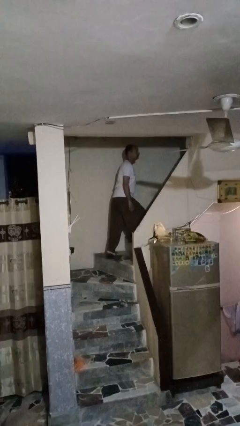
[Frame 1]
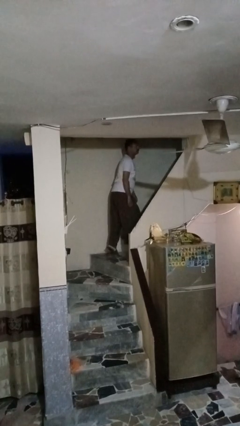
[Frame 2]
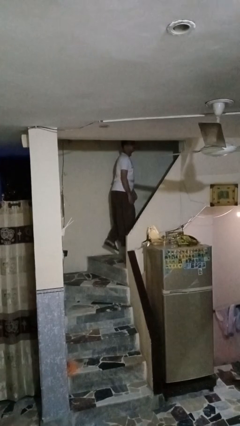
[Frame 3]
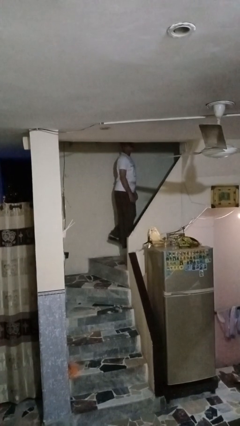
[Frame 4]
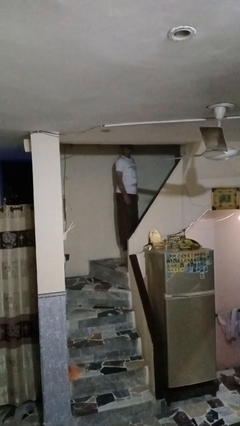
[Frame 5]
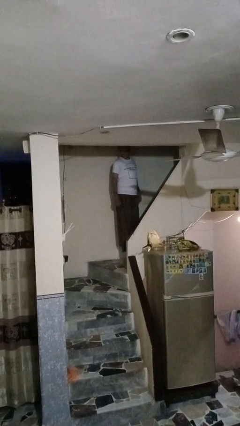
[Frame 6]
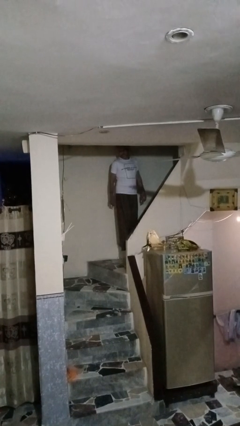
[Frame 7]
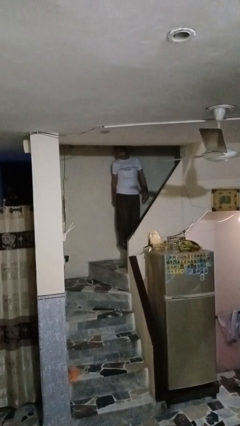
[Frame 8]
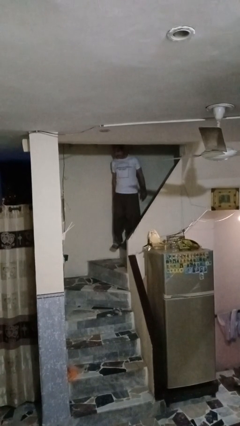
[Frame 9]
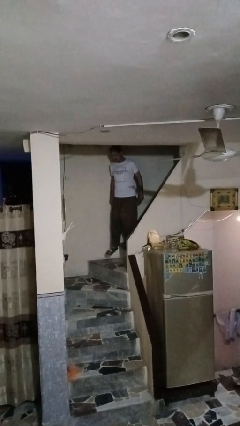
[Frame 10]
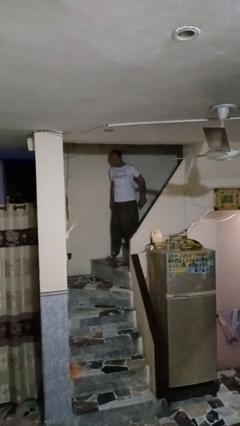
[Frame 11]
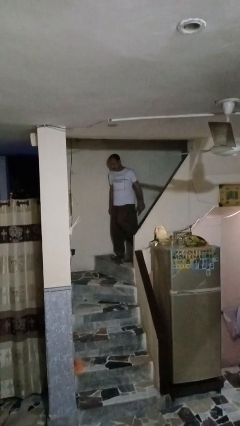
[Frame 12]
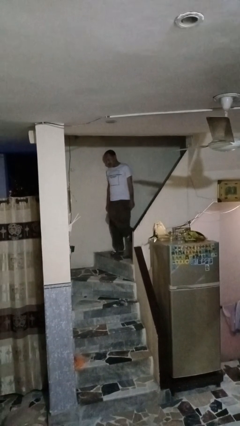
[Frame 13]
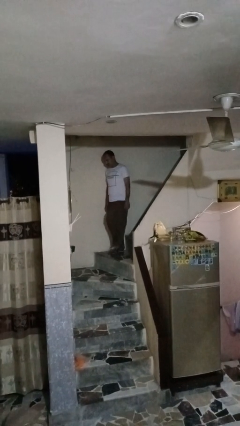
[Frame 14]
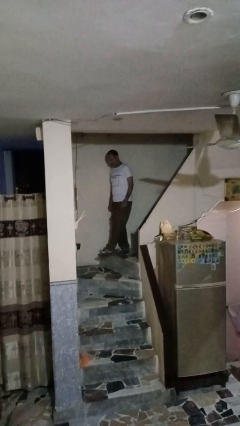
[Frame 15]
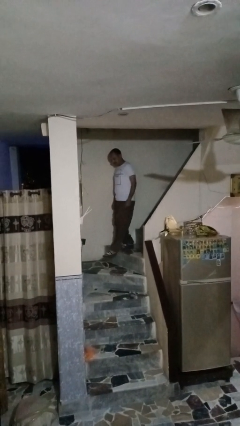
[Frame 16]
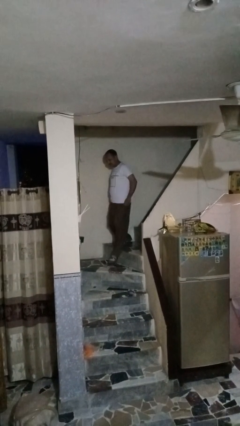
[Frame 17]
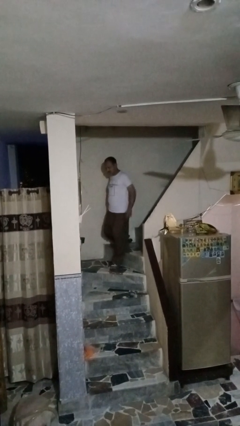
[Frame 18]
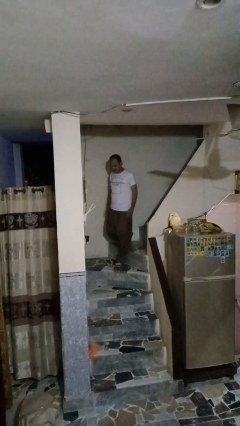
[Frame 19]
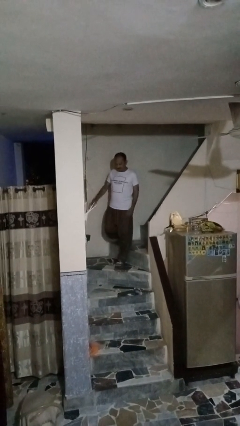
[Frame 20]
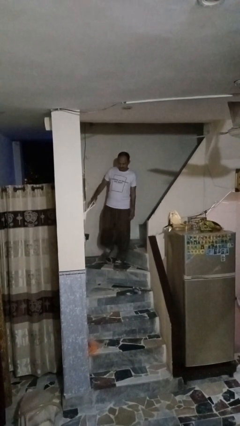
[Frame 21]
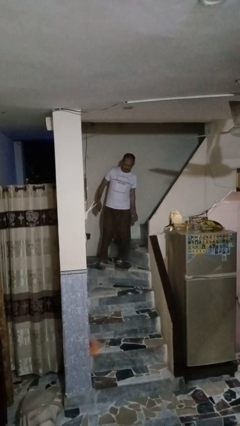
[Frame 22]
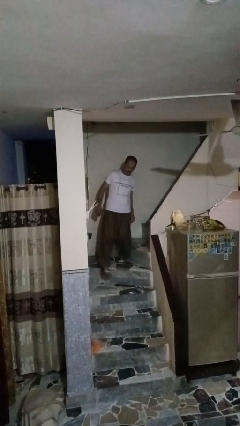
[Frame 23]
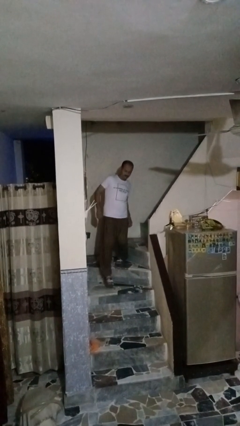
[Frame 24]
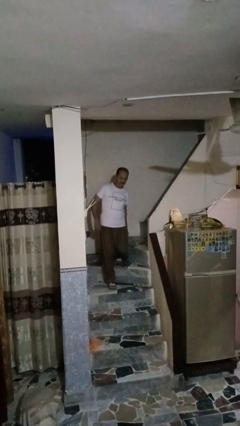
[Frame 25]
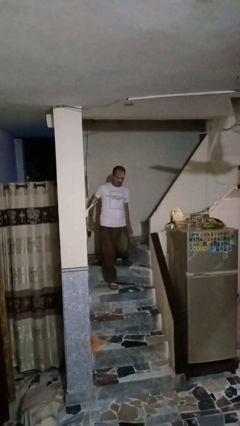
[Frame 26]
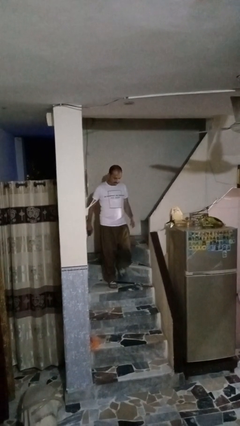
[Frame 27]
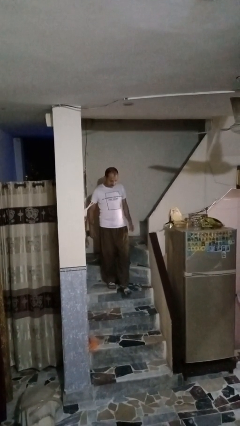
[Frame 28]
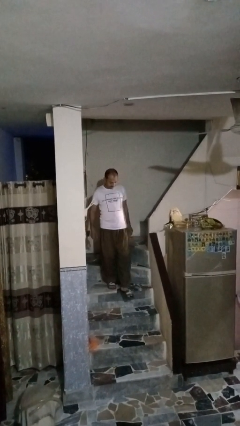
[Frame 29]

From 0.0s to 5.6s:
person climbs down stairs

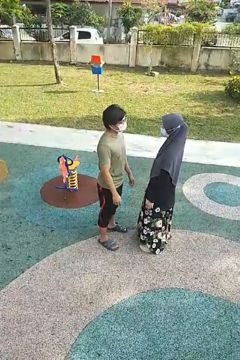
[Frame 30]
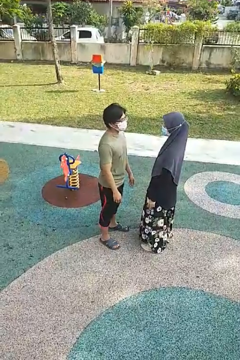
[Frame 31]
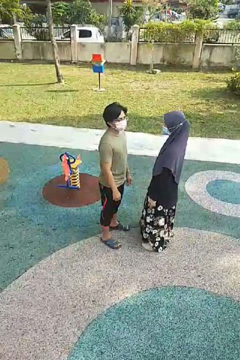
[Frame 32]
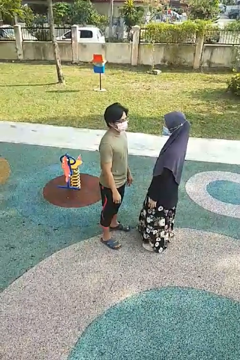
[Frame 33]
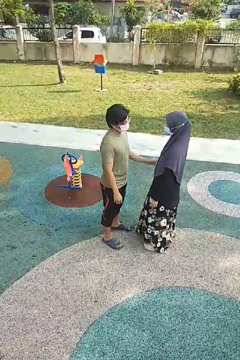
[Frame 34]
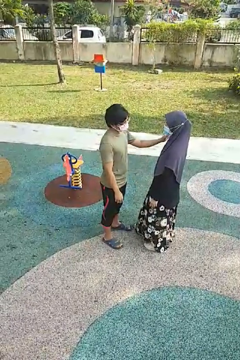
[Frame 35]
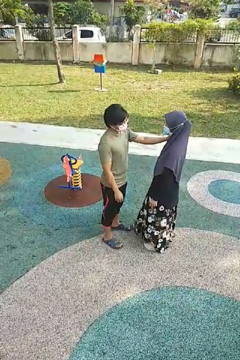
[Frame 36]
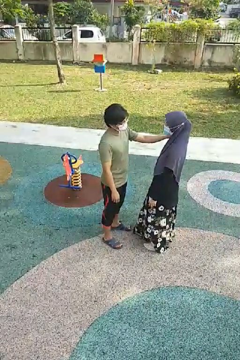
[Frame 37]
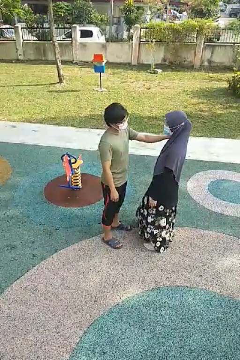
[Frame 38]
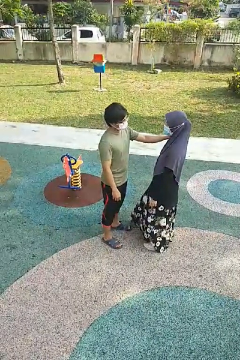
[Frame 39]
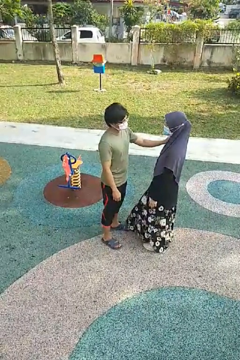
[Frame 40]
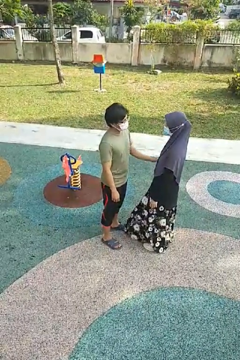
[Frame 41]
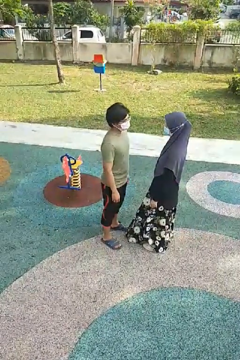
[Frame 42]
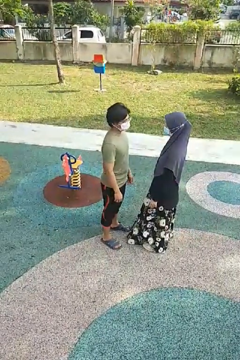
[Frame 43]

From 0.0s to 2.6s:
person pounds shoulders of person

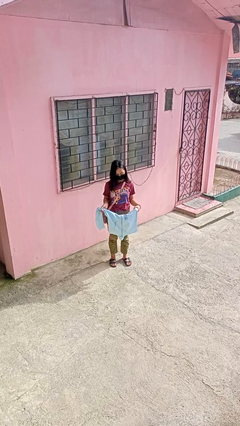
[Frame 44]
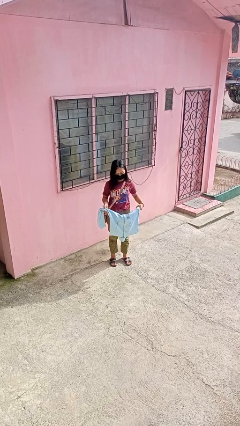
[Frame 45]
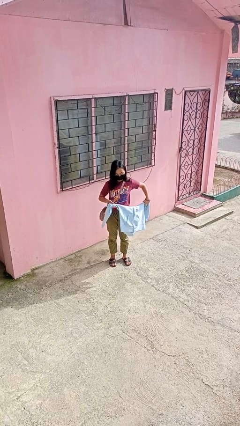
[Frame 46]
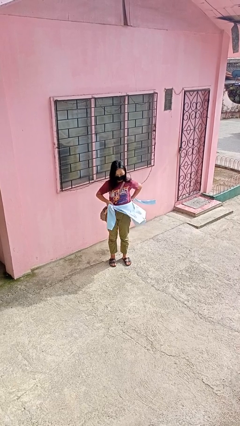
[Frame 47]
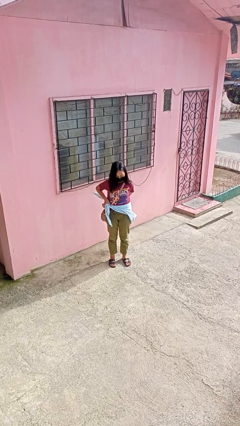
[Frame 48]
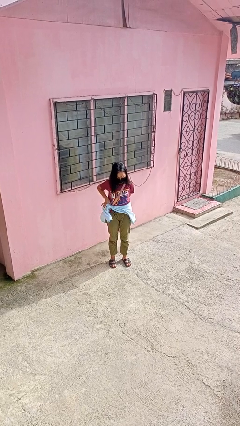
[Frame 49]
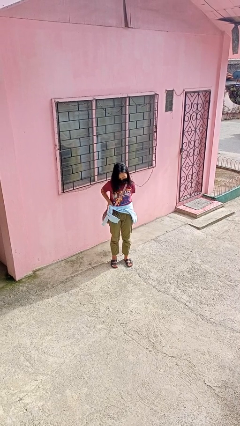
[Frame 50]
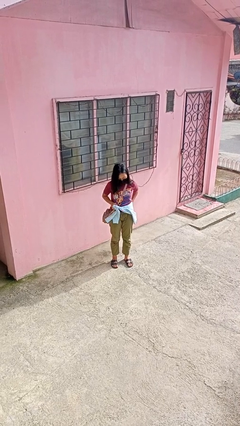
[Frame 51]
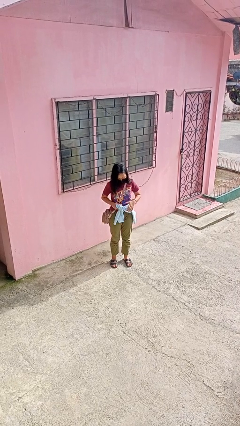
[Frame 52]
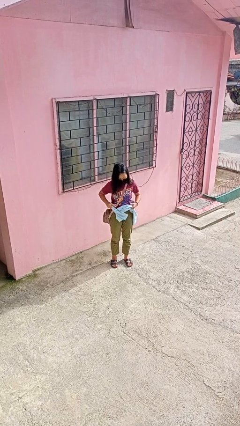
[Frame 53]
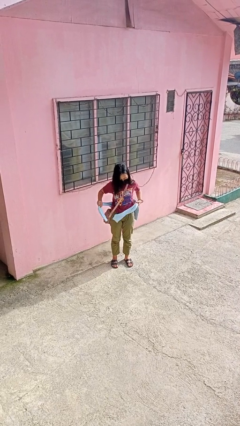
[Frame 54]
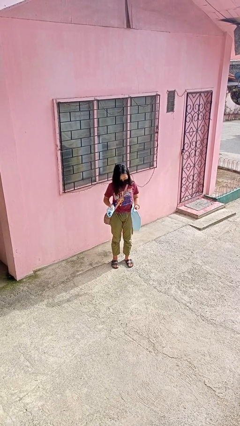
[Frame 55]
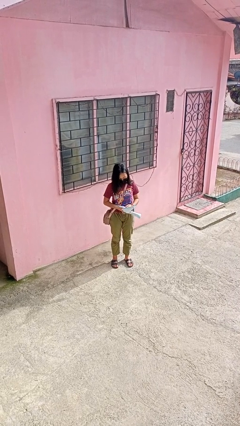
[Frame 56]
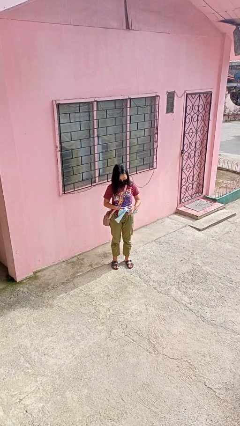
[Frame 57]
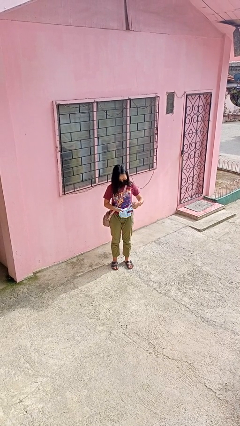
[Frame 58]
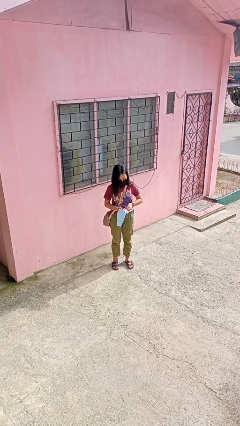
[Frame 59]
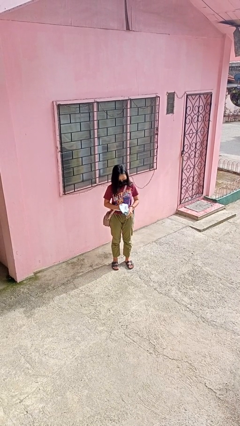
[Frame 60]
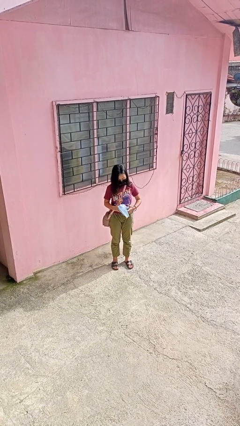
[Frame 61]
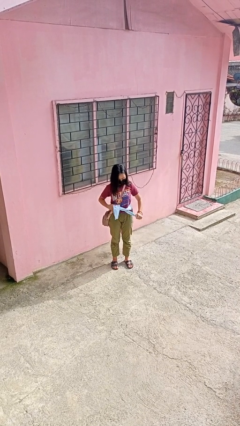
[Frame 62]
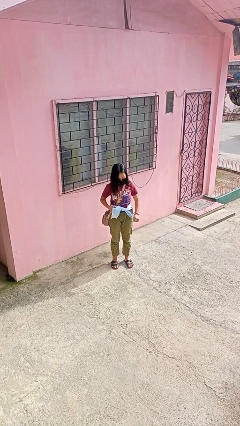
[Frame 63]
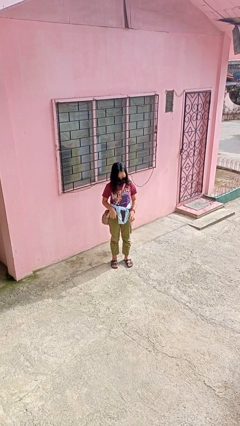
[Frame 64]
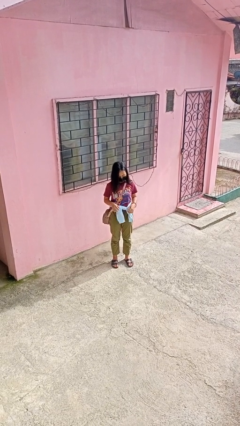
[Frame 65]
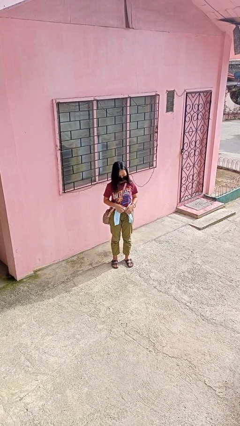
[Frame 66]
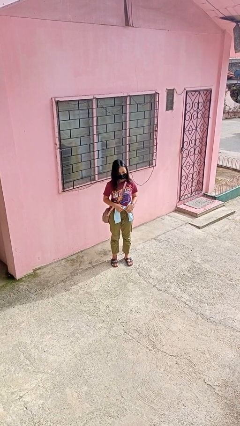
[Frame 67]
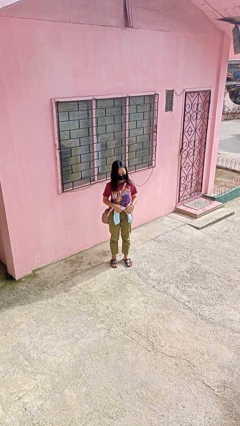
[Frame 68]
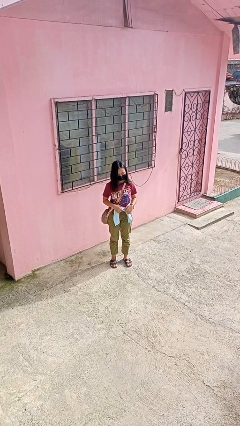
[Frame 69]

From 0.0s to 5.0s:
person ties jacket around waist

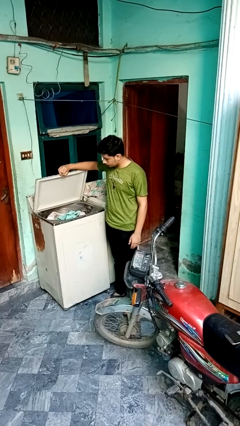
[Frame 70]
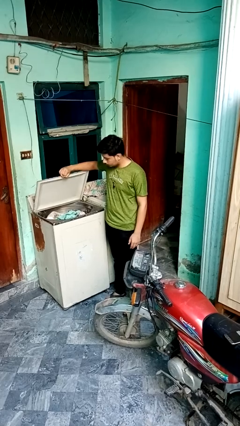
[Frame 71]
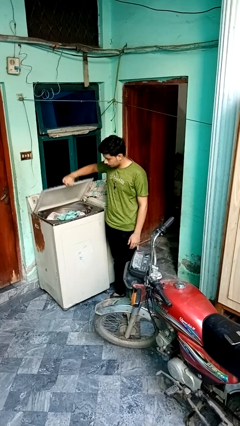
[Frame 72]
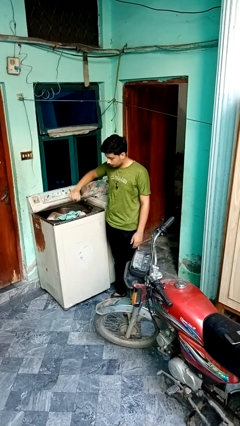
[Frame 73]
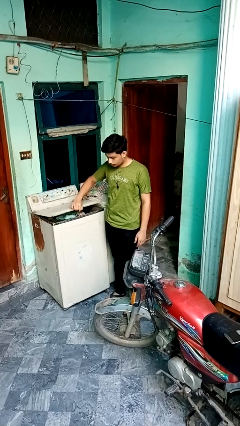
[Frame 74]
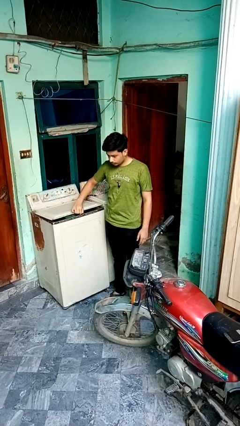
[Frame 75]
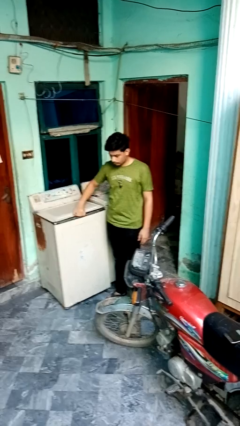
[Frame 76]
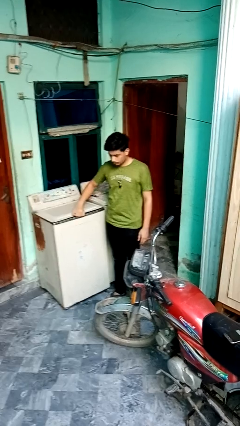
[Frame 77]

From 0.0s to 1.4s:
person closes clothes washer

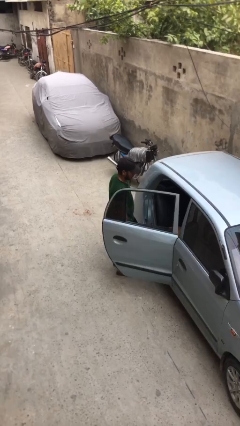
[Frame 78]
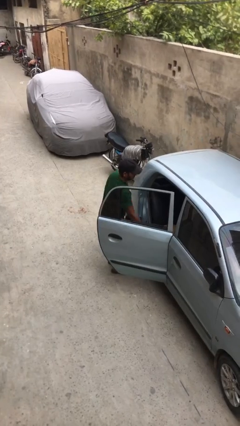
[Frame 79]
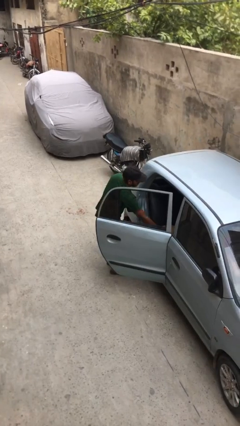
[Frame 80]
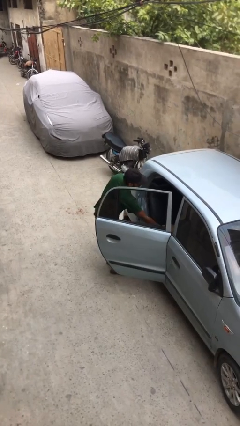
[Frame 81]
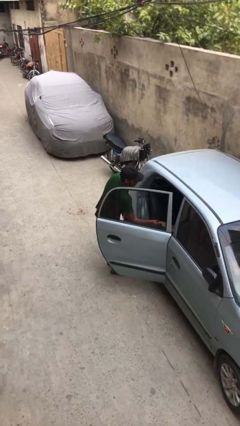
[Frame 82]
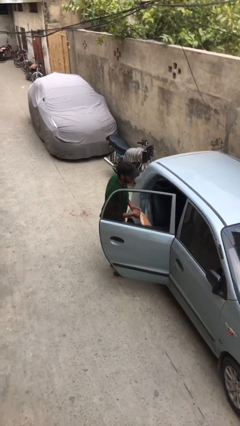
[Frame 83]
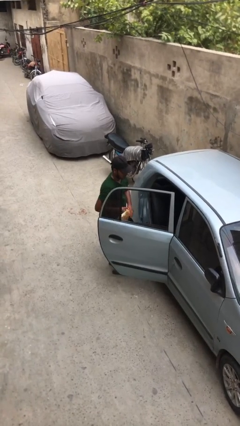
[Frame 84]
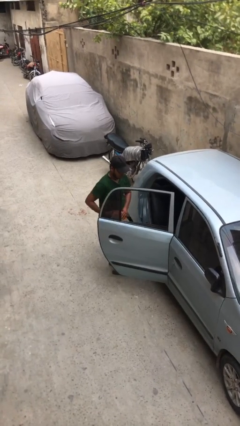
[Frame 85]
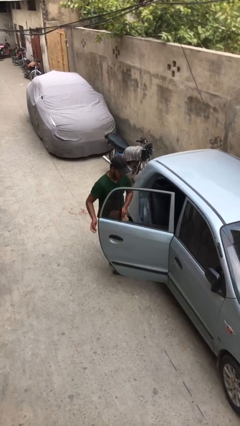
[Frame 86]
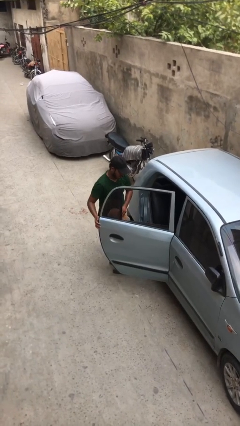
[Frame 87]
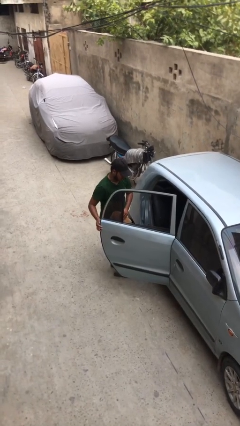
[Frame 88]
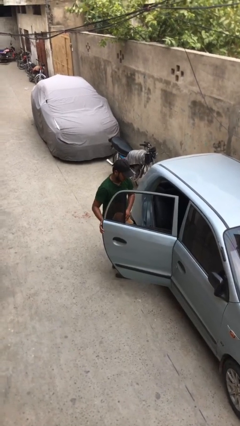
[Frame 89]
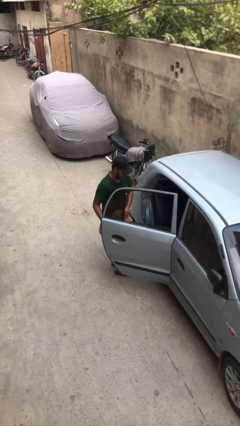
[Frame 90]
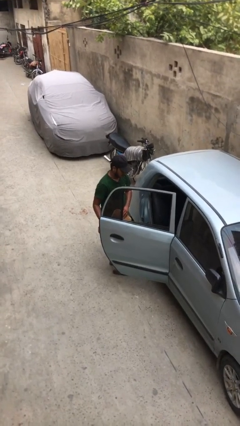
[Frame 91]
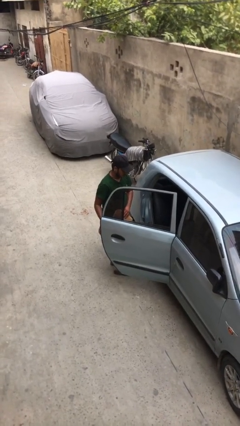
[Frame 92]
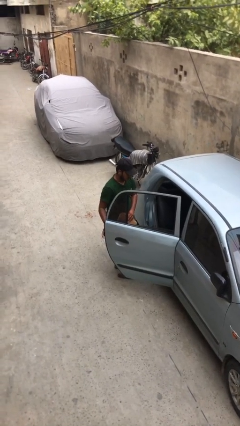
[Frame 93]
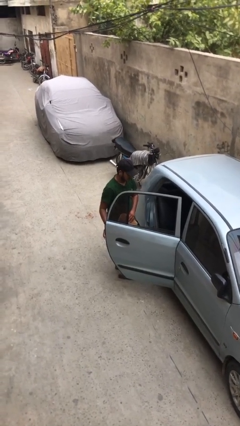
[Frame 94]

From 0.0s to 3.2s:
person unloads car

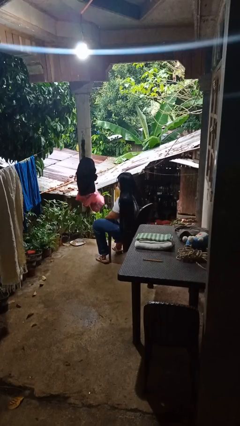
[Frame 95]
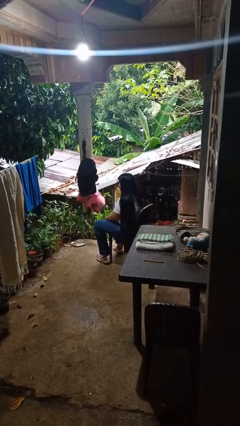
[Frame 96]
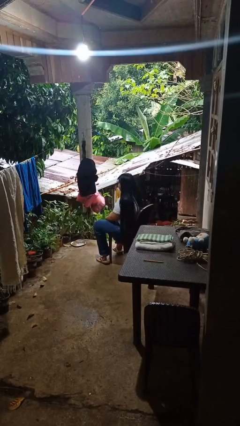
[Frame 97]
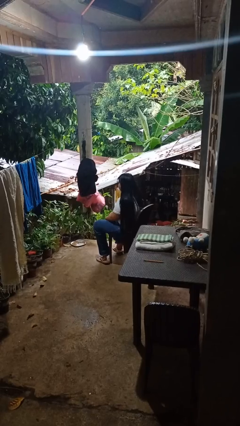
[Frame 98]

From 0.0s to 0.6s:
person swats bug
